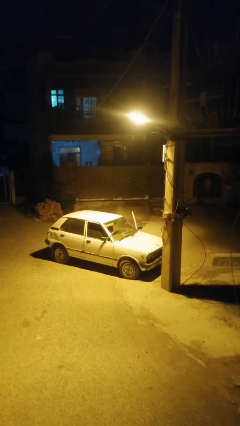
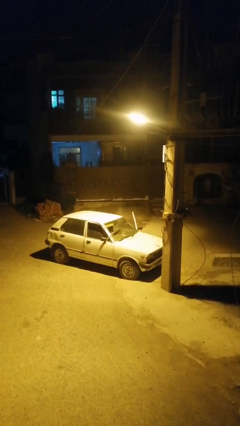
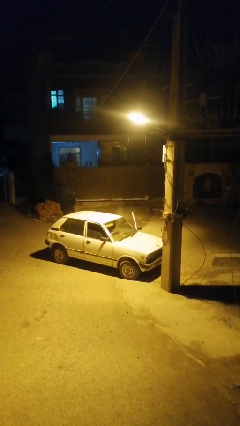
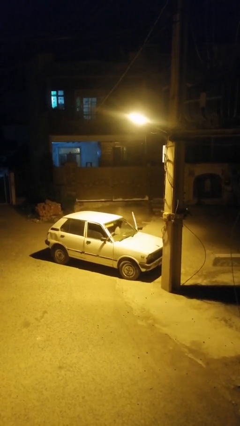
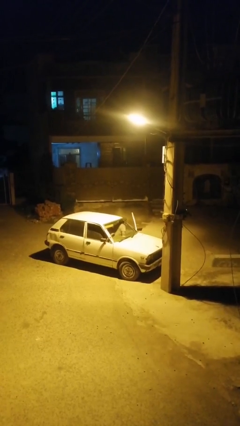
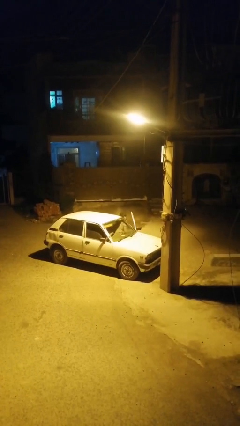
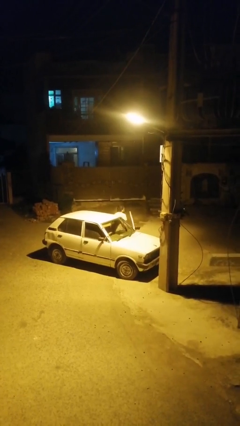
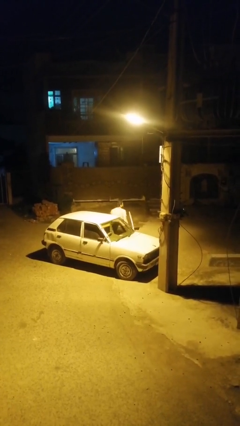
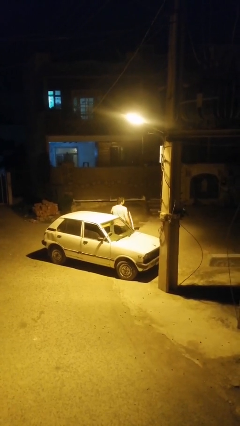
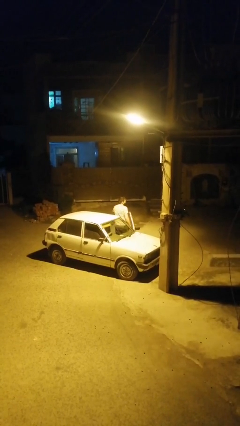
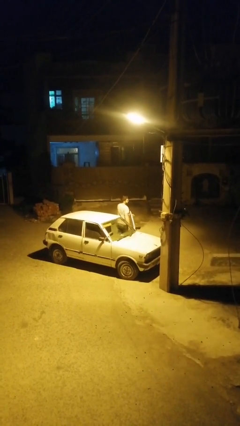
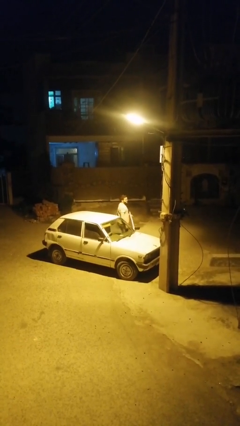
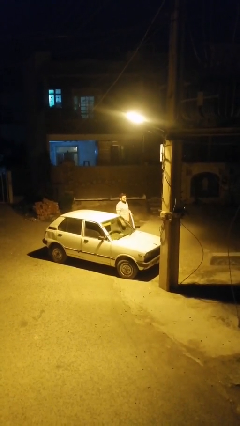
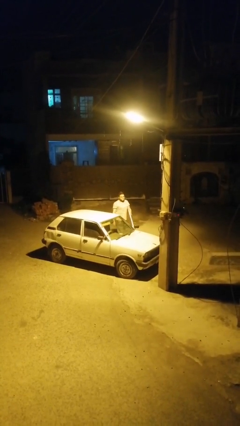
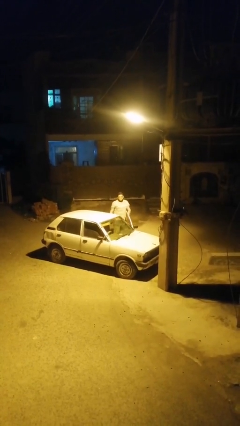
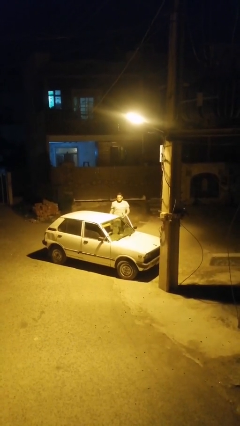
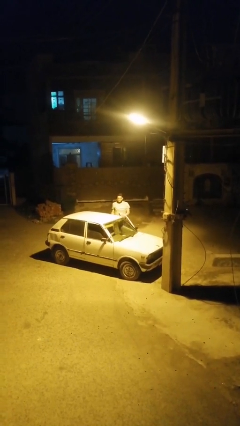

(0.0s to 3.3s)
person exits car

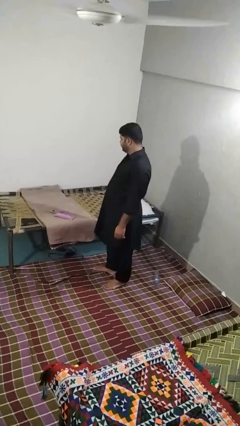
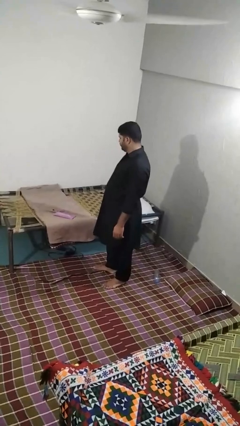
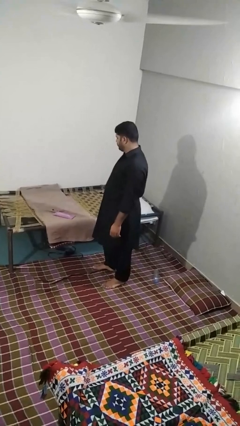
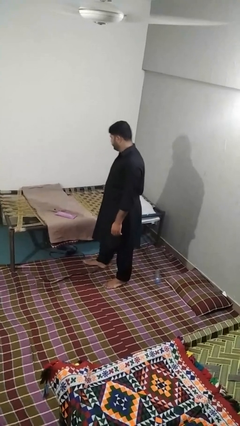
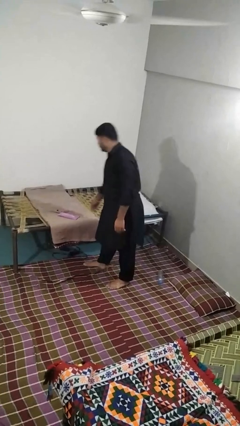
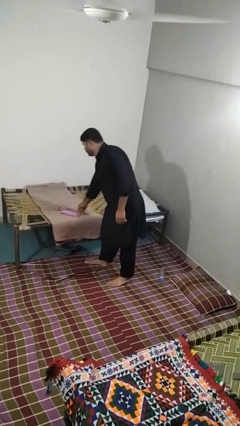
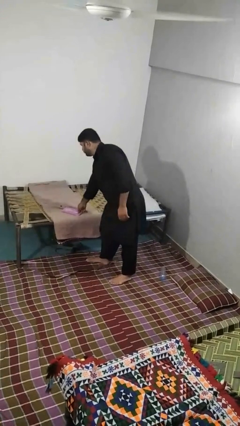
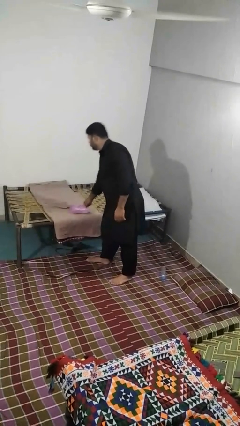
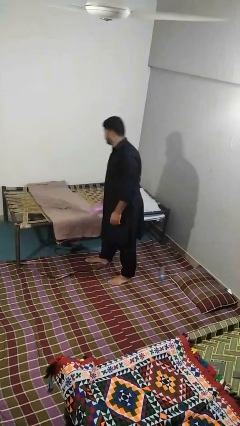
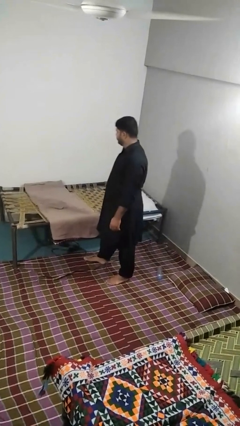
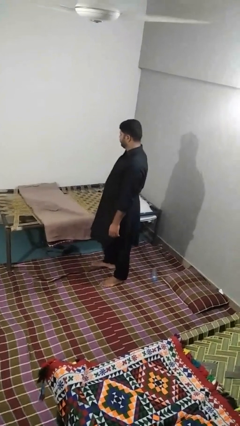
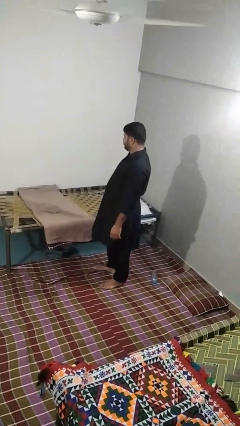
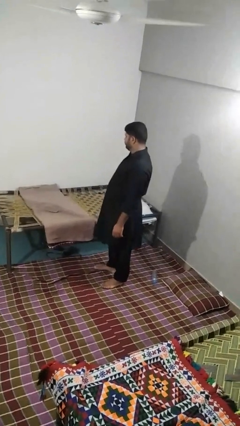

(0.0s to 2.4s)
person picks up object from bed

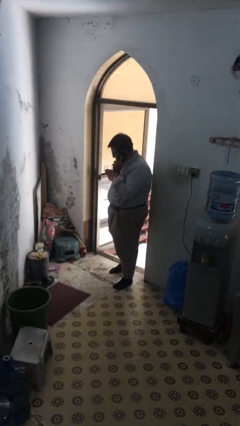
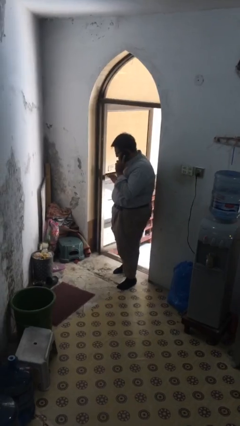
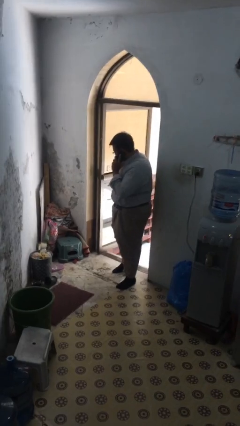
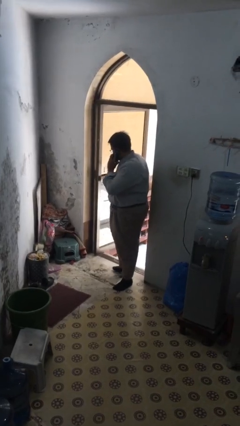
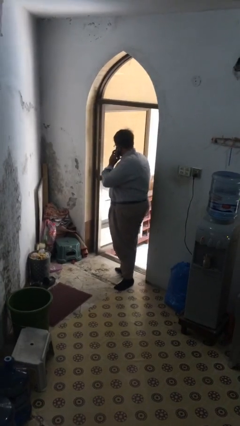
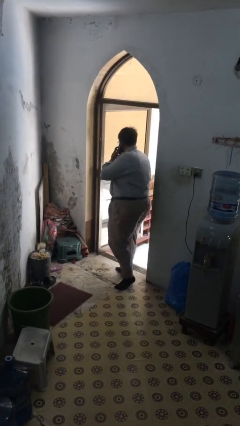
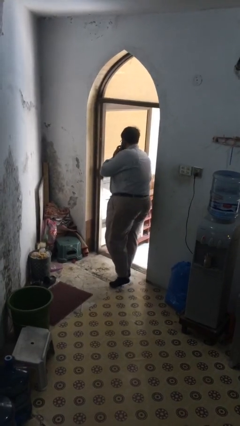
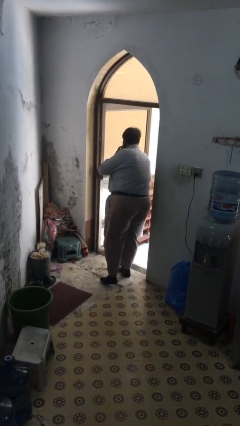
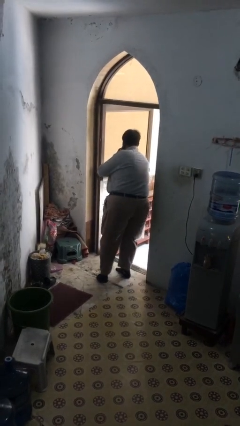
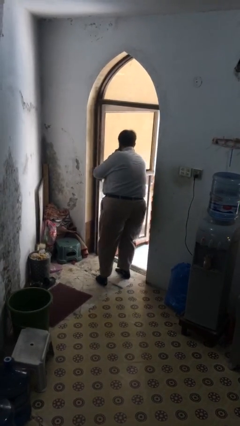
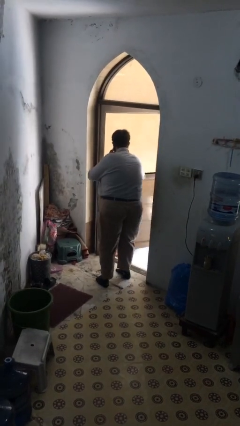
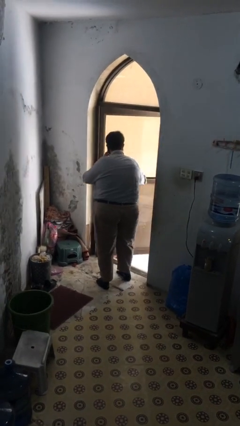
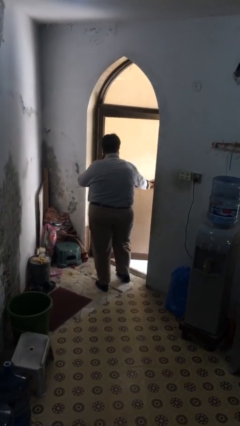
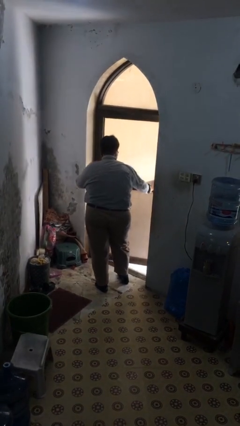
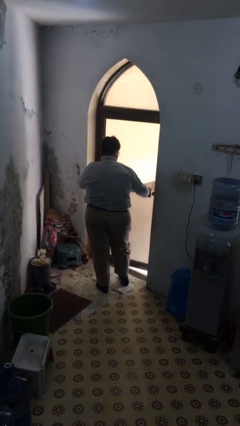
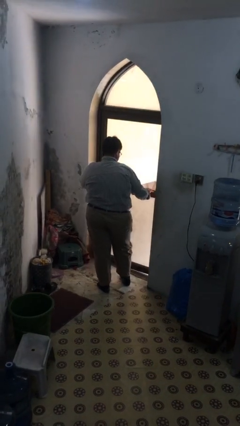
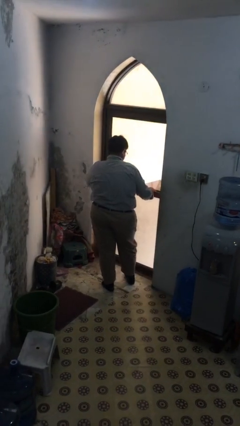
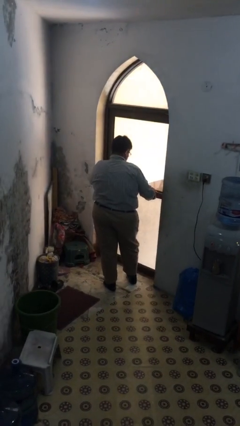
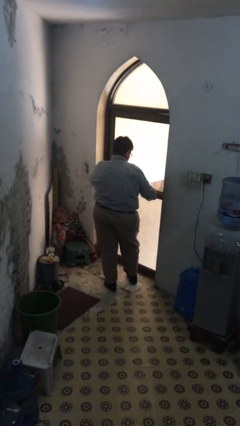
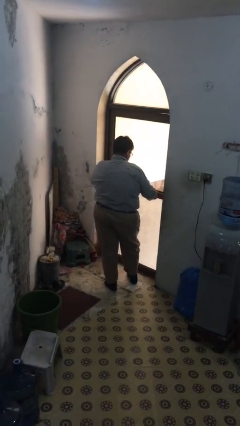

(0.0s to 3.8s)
person closes facility door

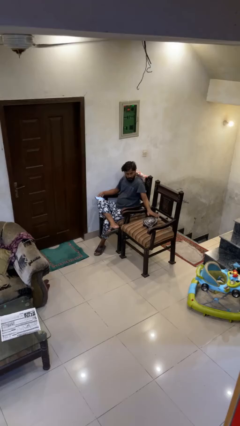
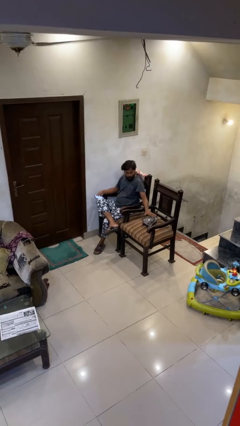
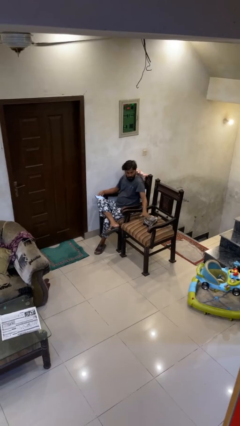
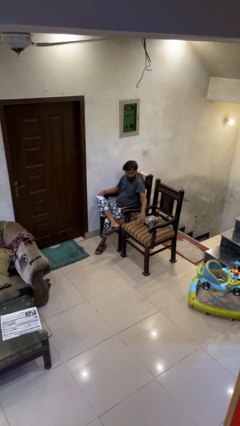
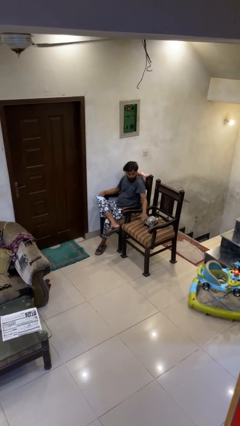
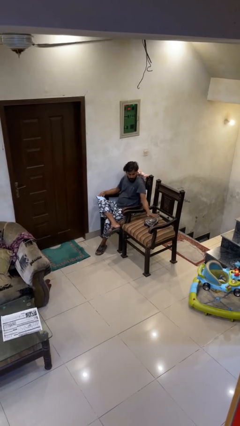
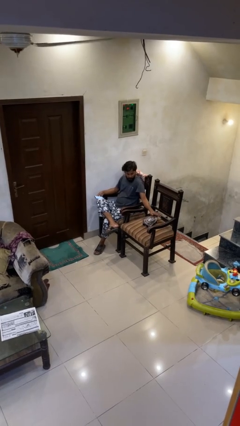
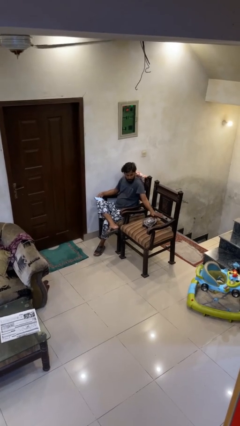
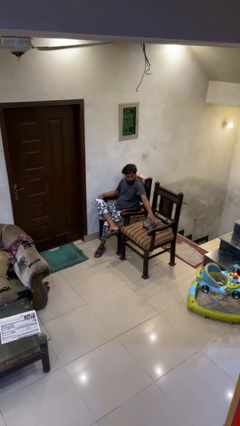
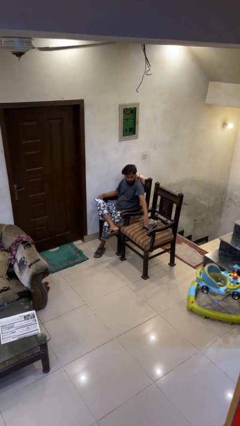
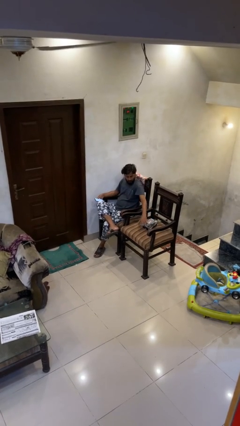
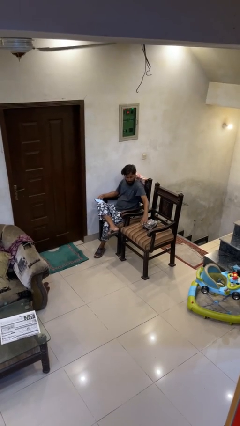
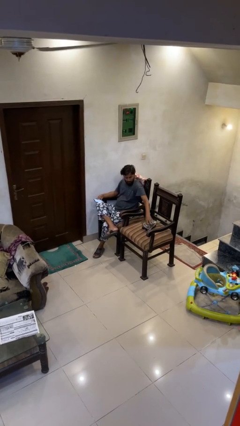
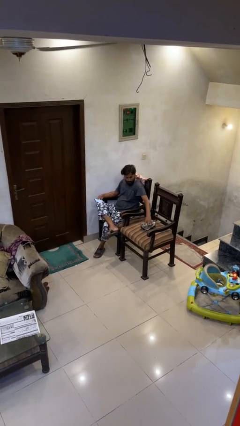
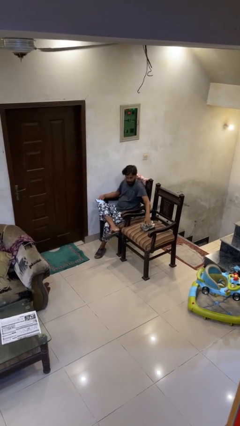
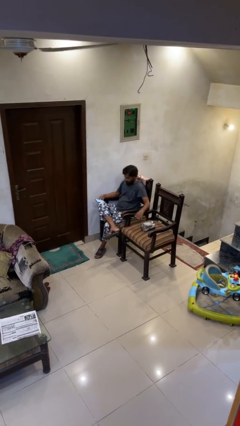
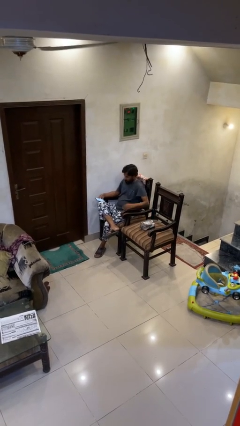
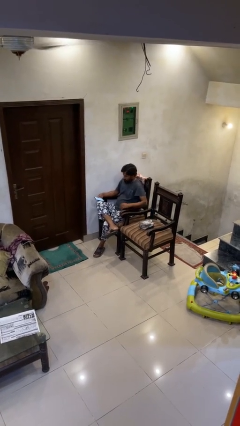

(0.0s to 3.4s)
person waves hand over object

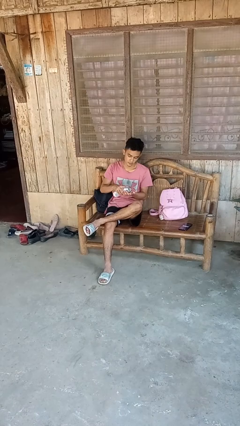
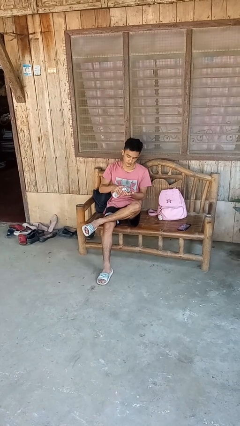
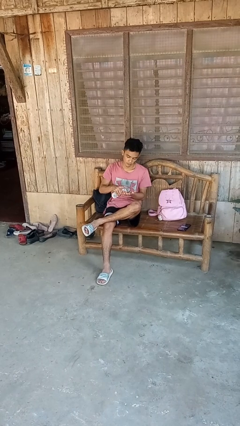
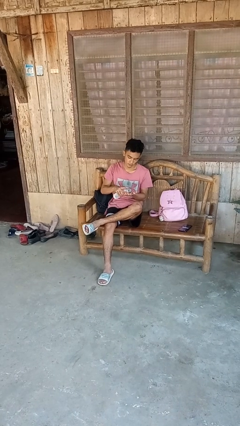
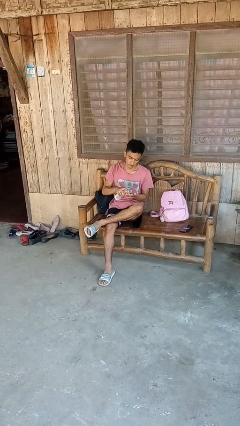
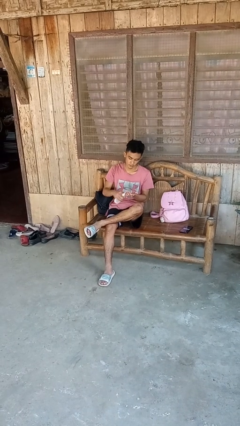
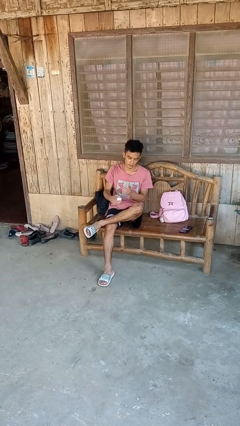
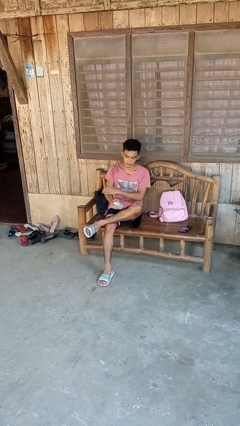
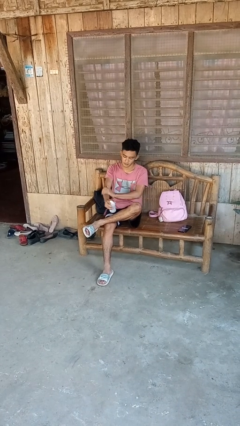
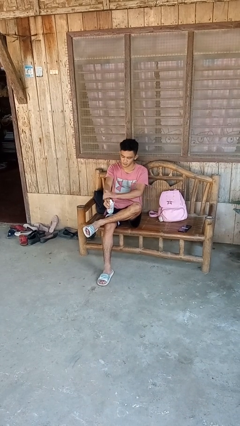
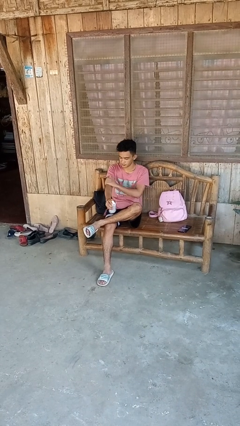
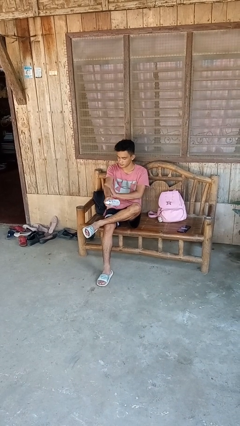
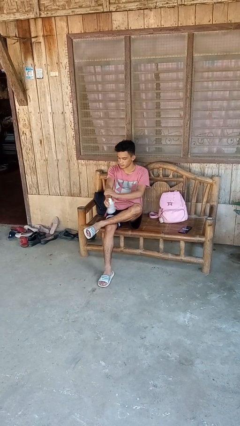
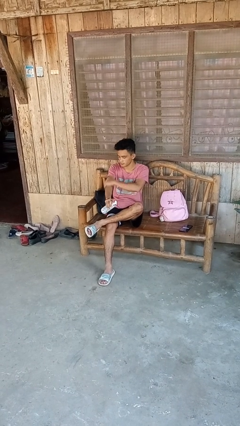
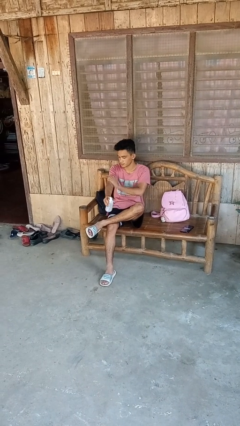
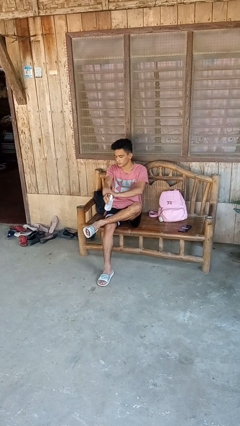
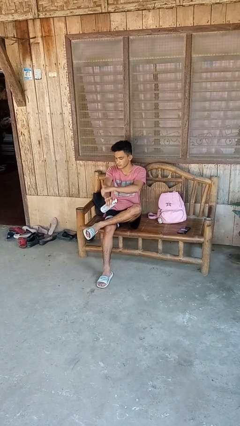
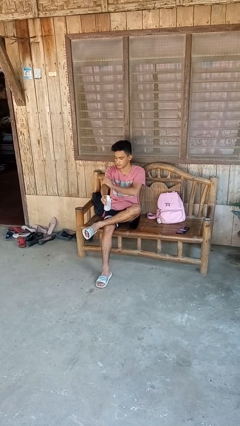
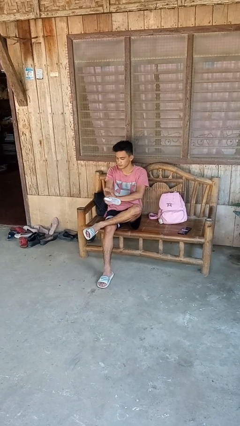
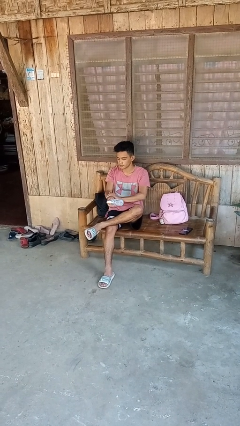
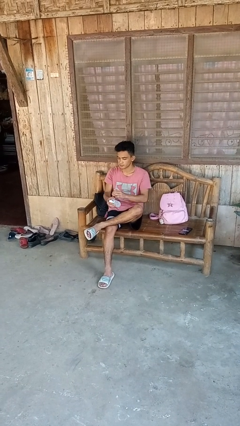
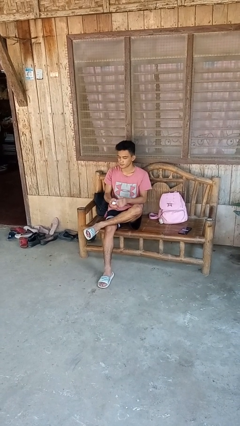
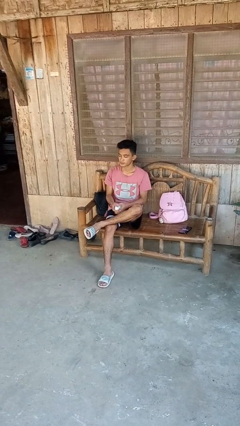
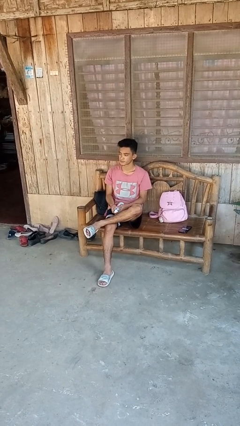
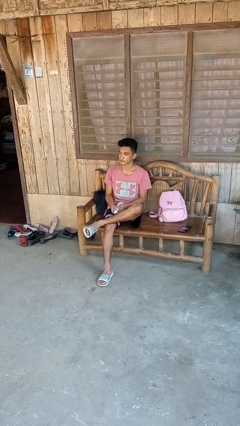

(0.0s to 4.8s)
person applies sunscreen
